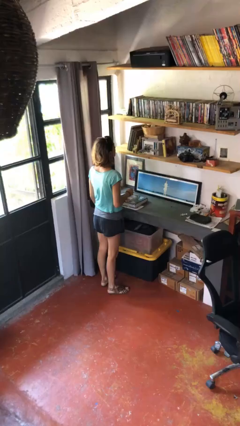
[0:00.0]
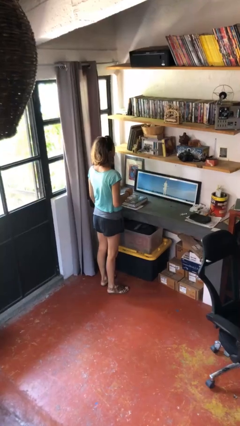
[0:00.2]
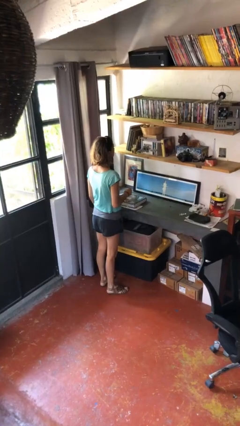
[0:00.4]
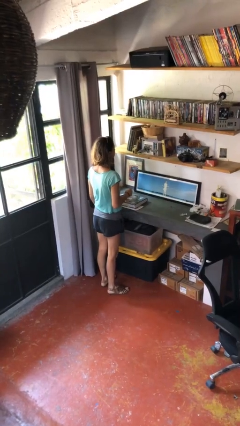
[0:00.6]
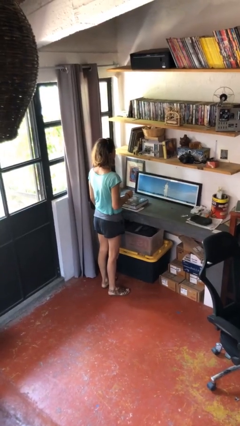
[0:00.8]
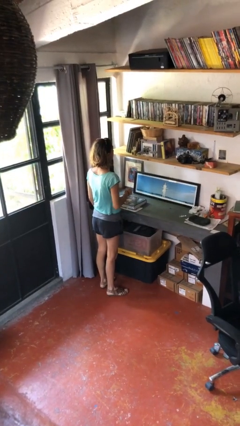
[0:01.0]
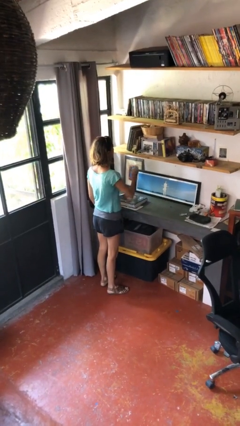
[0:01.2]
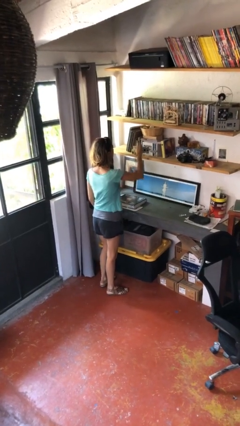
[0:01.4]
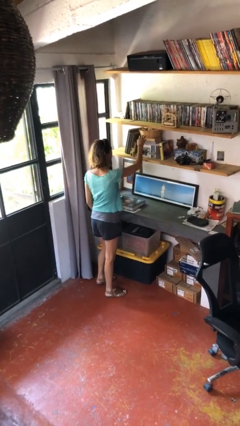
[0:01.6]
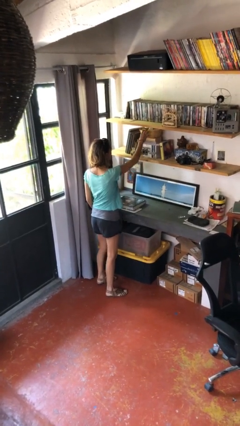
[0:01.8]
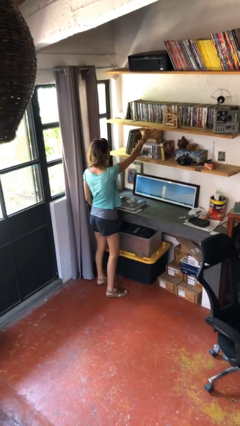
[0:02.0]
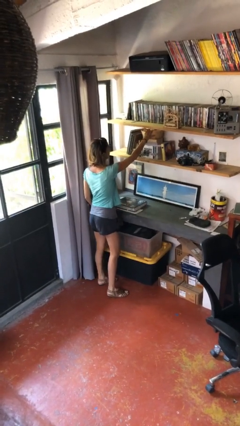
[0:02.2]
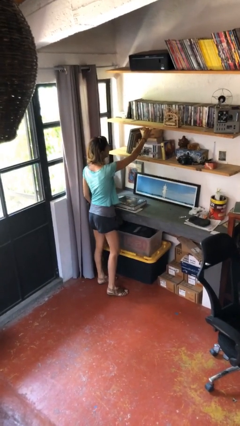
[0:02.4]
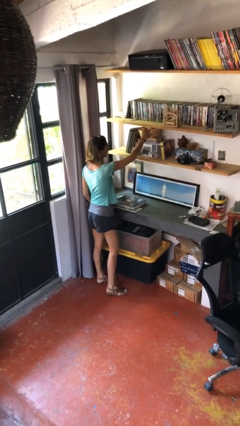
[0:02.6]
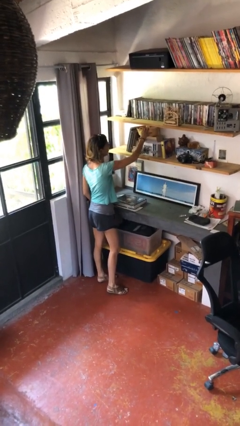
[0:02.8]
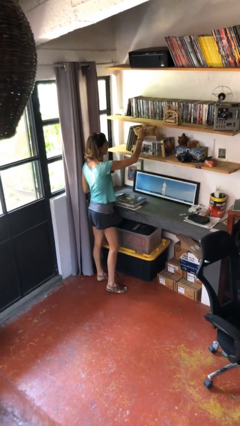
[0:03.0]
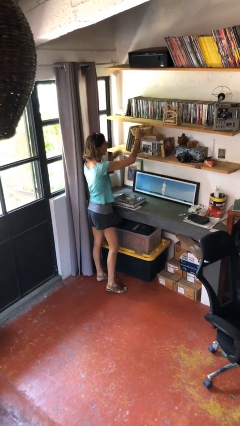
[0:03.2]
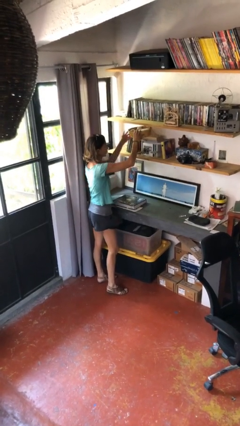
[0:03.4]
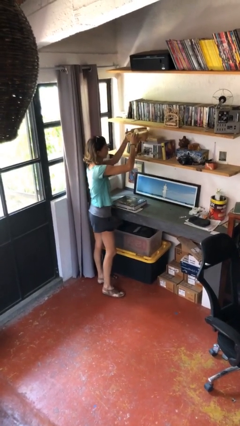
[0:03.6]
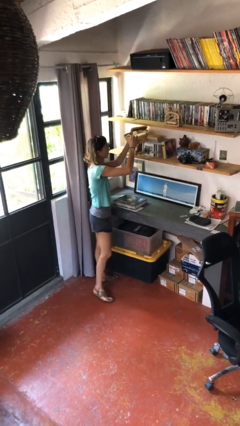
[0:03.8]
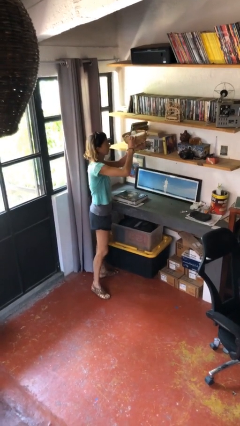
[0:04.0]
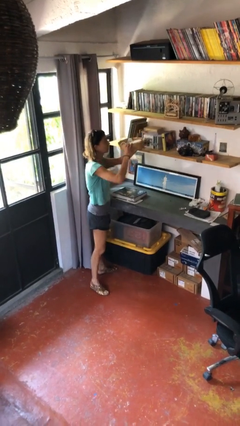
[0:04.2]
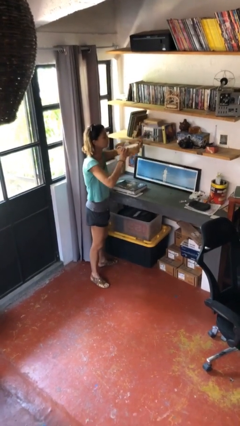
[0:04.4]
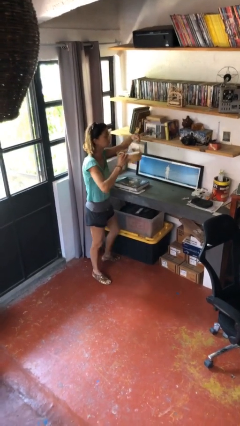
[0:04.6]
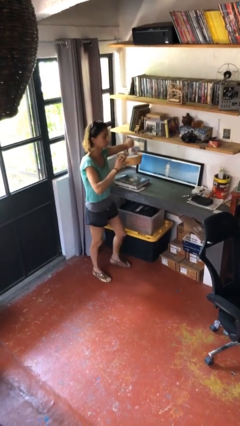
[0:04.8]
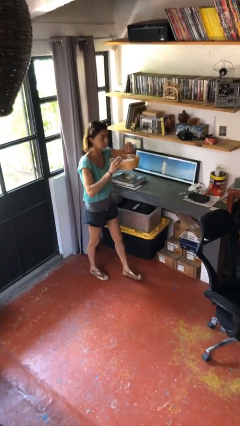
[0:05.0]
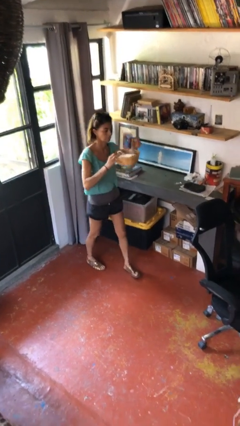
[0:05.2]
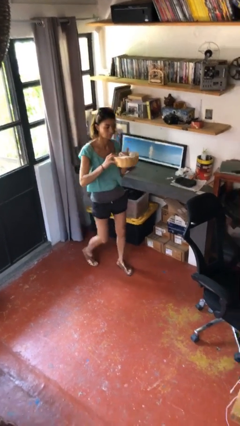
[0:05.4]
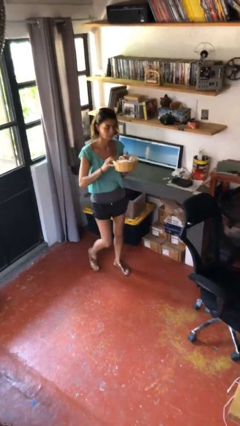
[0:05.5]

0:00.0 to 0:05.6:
person picks up object from shelf

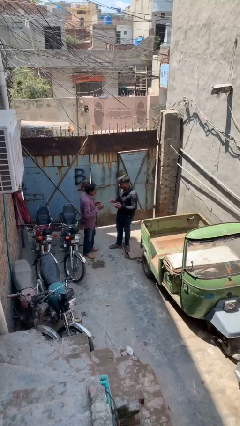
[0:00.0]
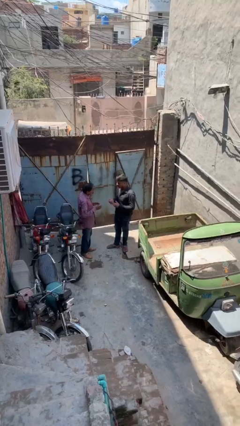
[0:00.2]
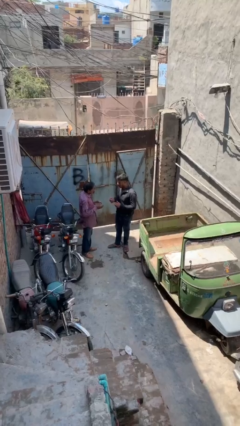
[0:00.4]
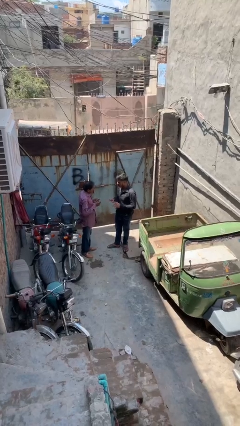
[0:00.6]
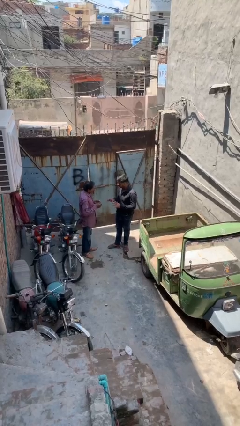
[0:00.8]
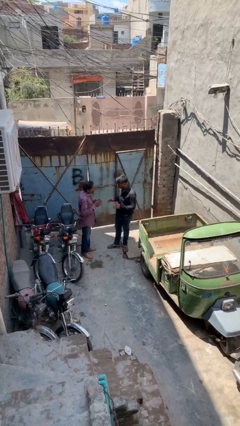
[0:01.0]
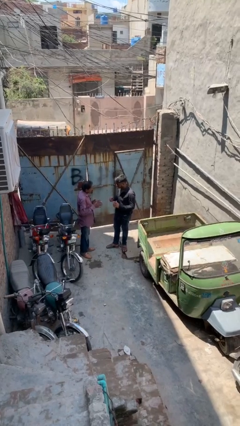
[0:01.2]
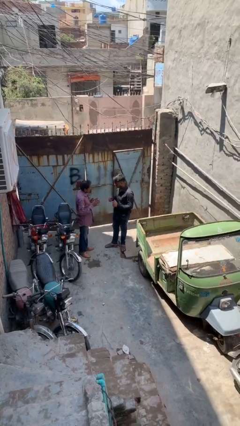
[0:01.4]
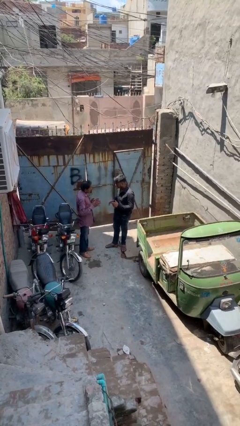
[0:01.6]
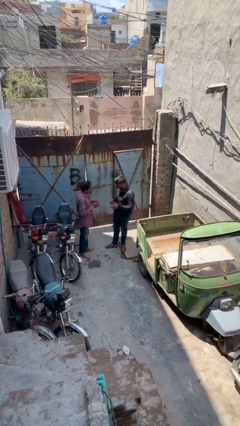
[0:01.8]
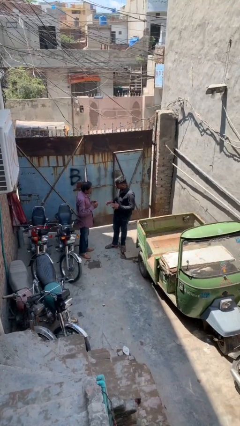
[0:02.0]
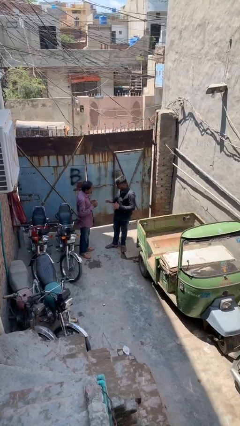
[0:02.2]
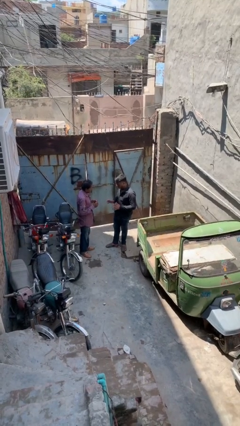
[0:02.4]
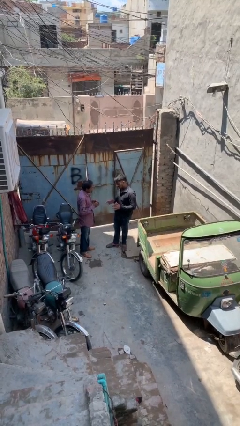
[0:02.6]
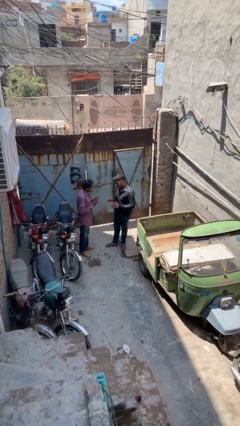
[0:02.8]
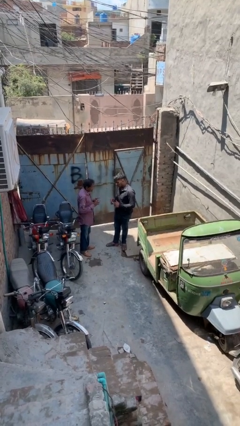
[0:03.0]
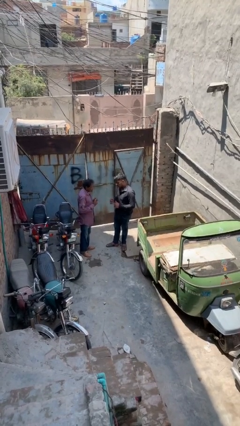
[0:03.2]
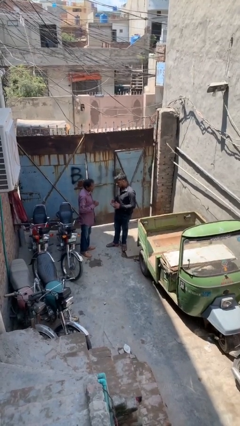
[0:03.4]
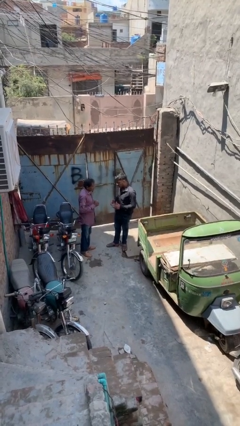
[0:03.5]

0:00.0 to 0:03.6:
person talks to person

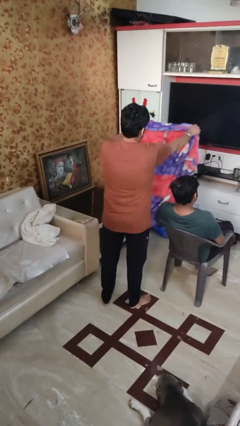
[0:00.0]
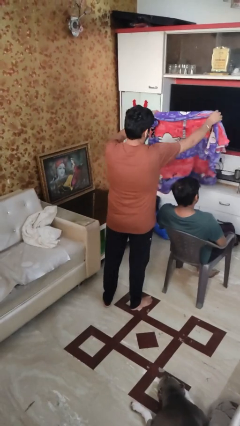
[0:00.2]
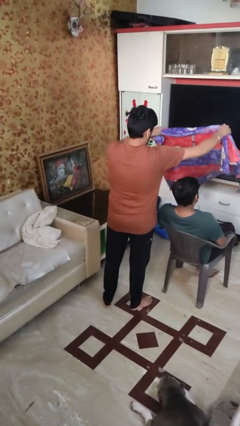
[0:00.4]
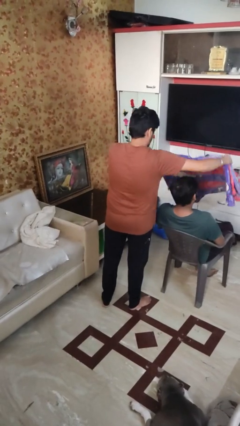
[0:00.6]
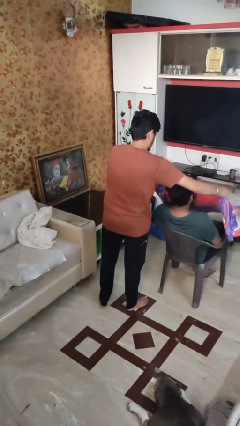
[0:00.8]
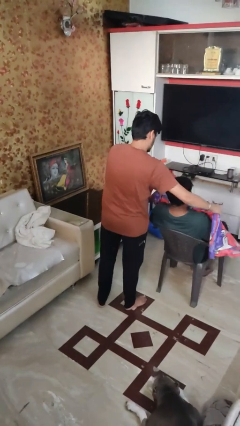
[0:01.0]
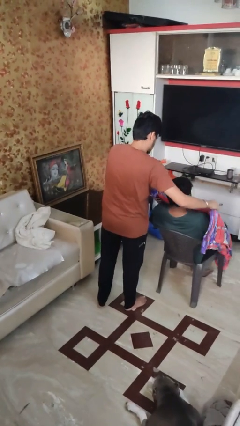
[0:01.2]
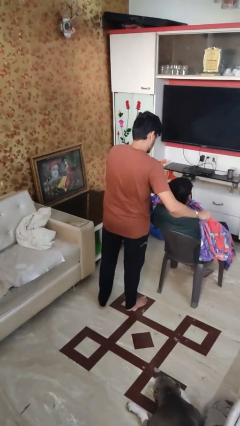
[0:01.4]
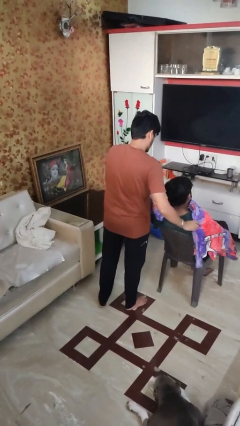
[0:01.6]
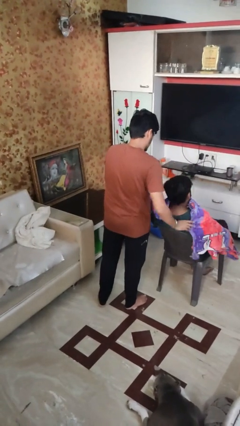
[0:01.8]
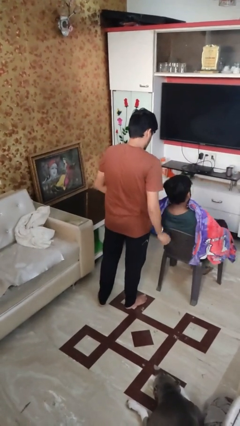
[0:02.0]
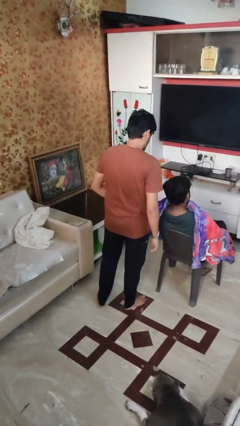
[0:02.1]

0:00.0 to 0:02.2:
person covers friend with blanket

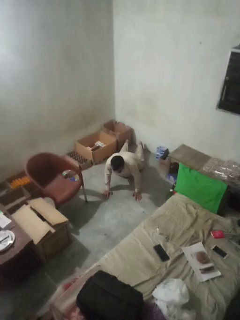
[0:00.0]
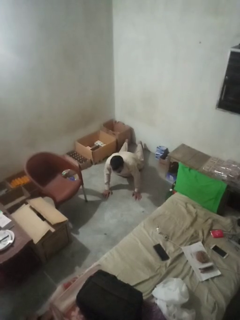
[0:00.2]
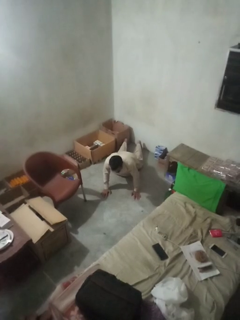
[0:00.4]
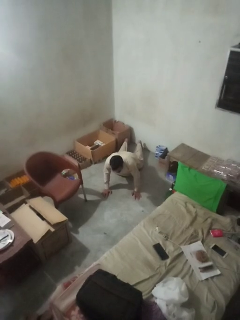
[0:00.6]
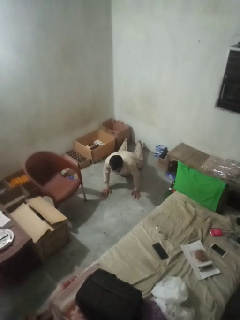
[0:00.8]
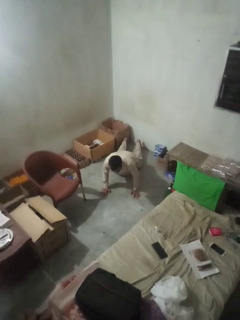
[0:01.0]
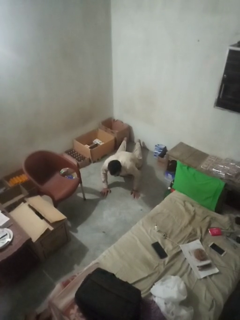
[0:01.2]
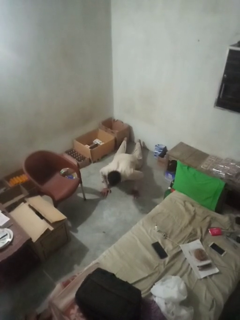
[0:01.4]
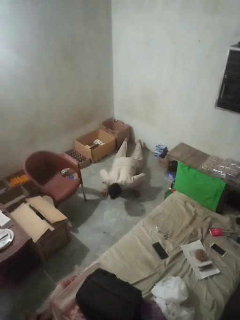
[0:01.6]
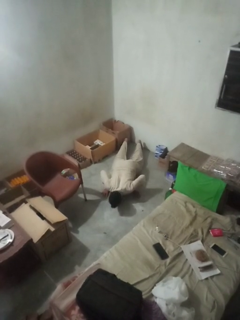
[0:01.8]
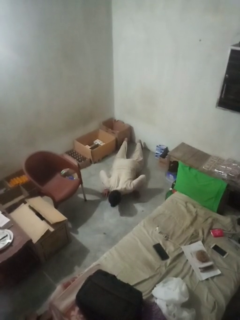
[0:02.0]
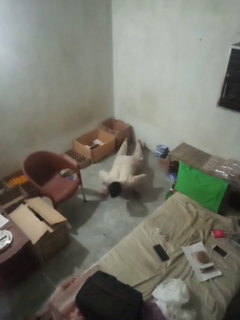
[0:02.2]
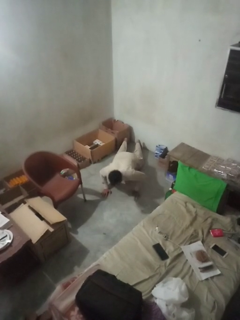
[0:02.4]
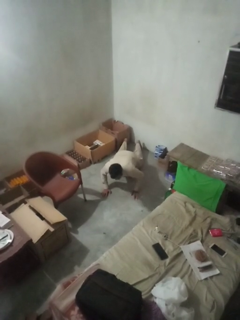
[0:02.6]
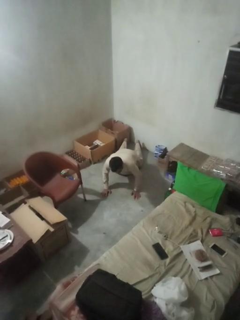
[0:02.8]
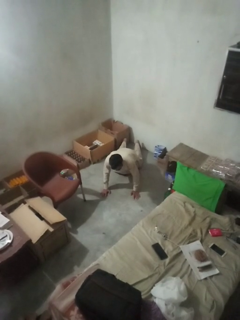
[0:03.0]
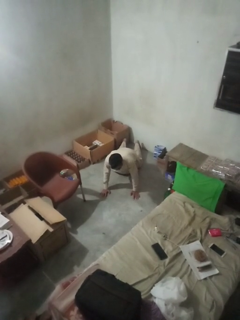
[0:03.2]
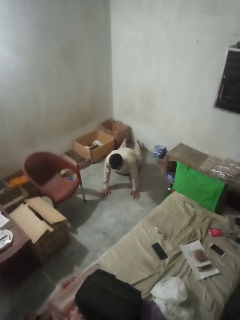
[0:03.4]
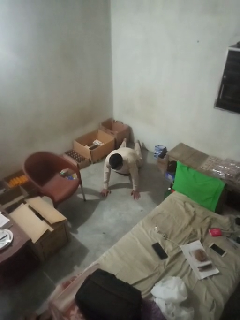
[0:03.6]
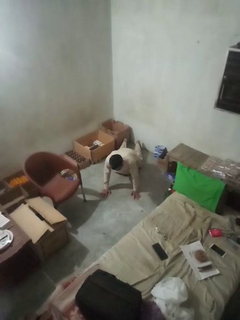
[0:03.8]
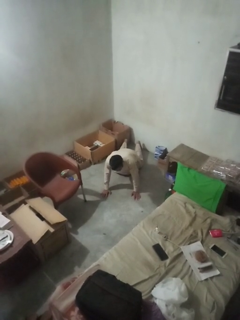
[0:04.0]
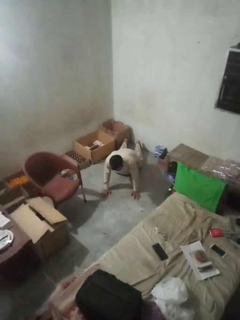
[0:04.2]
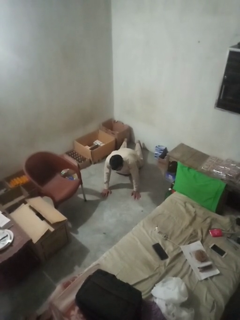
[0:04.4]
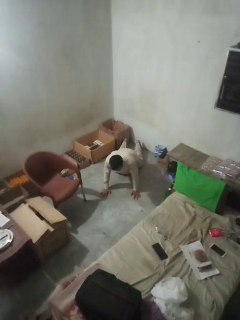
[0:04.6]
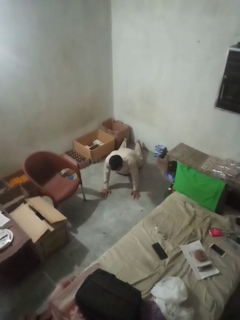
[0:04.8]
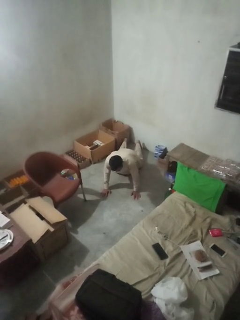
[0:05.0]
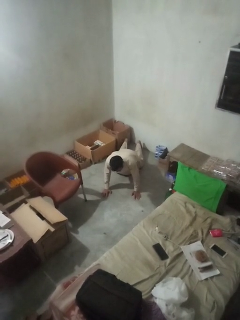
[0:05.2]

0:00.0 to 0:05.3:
person exercises with pushup

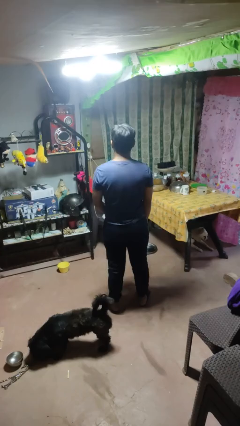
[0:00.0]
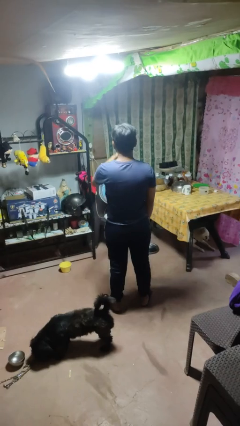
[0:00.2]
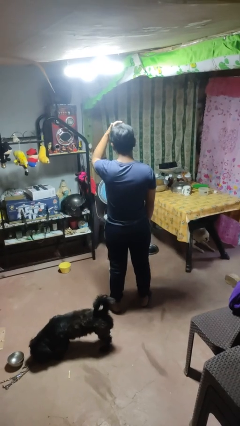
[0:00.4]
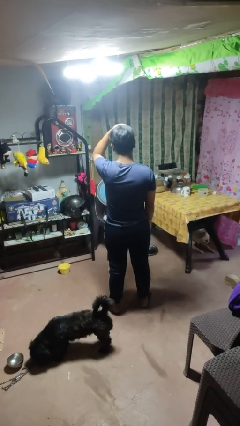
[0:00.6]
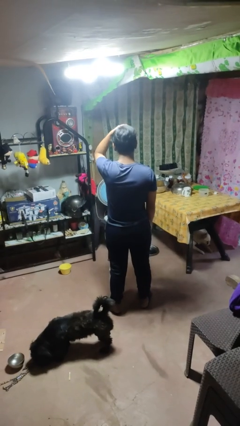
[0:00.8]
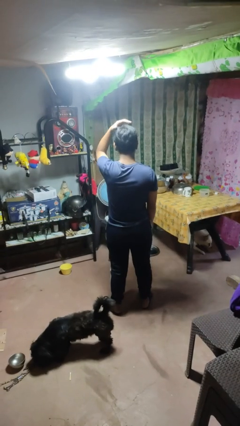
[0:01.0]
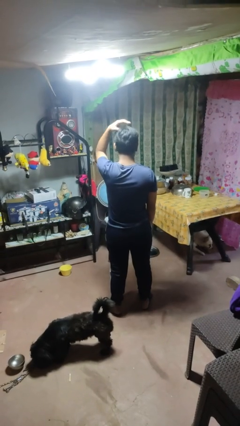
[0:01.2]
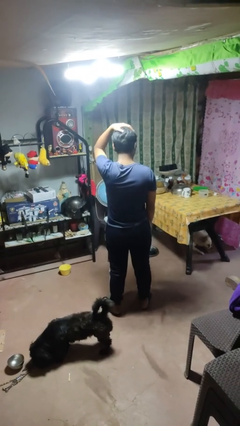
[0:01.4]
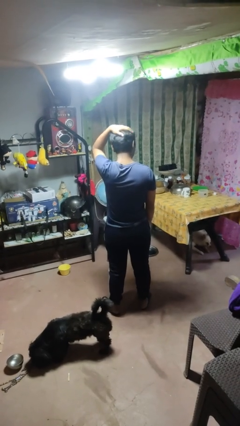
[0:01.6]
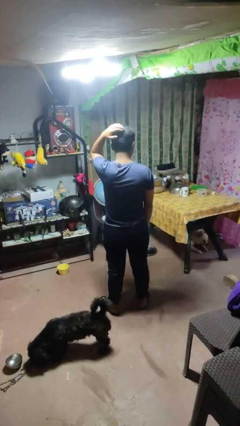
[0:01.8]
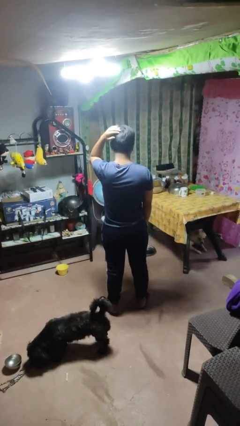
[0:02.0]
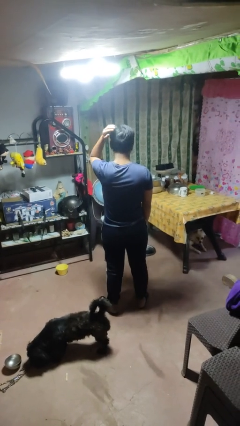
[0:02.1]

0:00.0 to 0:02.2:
person pats head
